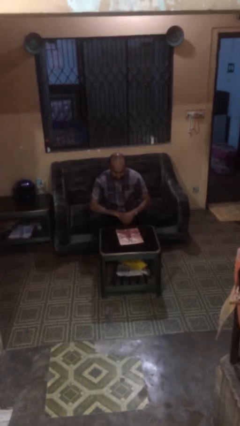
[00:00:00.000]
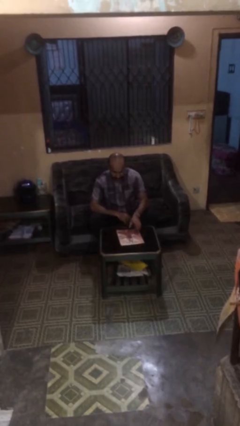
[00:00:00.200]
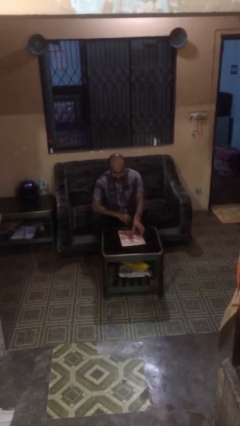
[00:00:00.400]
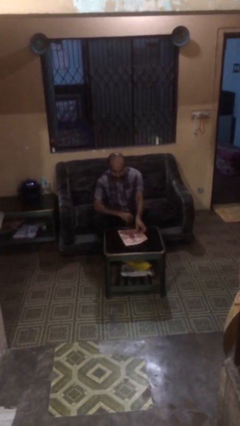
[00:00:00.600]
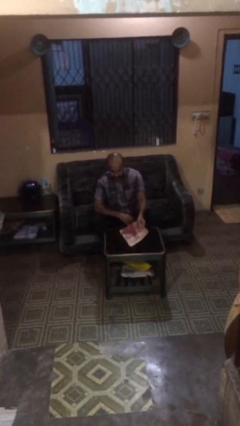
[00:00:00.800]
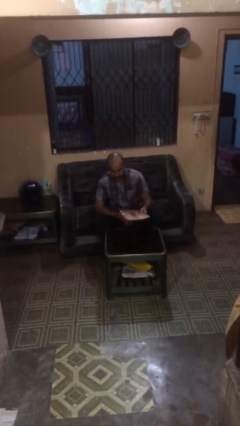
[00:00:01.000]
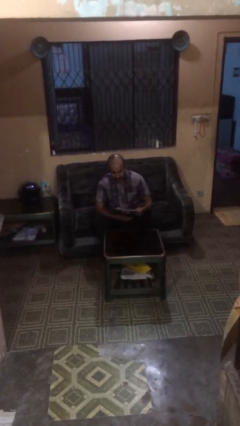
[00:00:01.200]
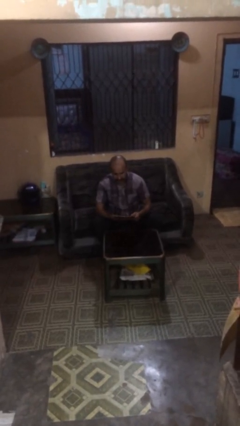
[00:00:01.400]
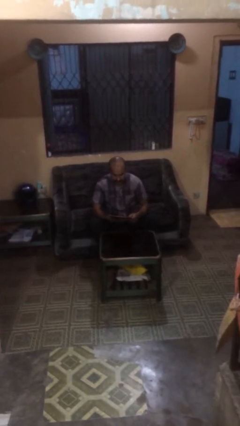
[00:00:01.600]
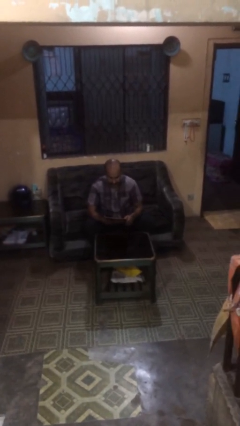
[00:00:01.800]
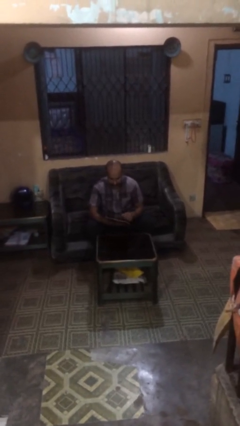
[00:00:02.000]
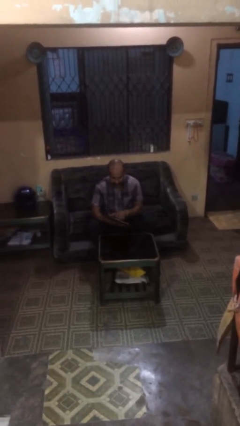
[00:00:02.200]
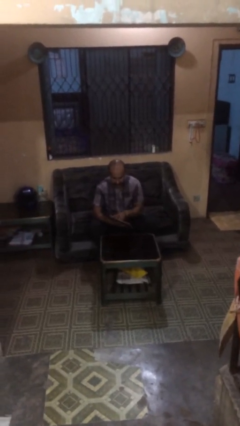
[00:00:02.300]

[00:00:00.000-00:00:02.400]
person picks up object from table

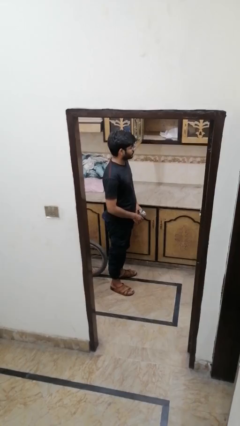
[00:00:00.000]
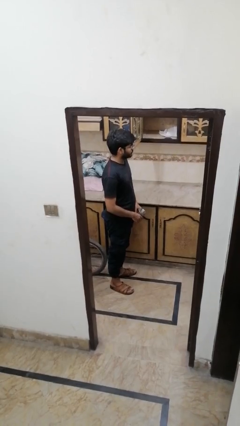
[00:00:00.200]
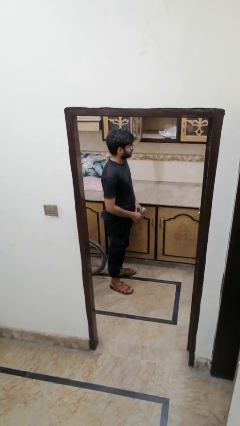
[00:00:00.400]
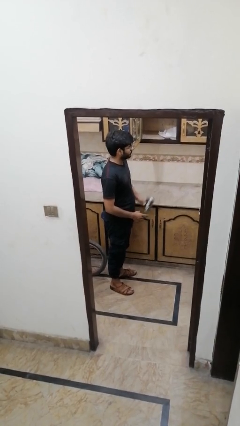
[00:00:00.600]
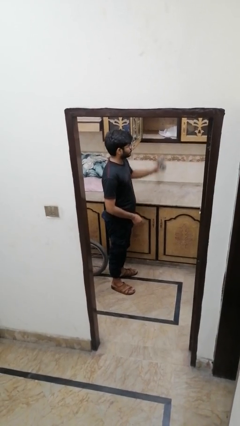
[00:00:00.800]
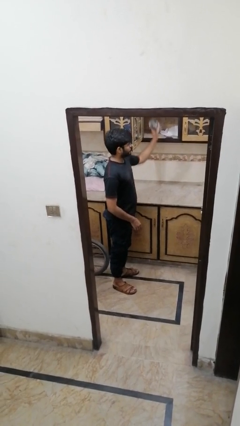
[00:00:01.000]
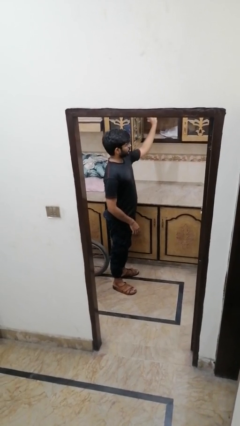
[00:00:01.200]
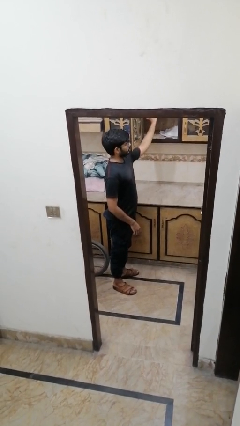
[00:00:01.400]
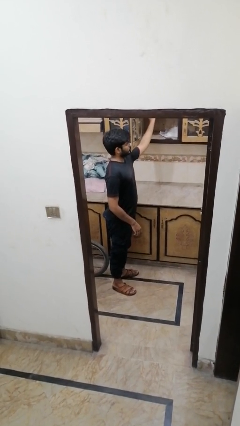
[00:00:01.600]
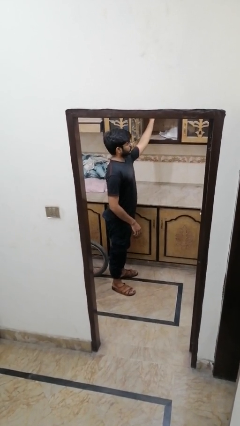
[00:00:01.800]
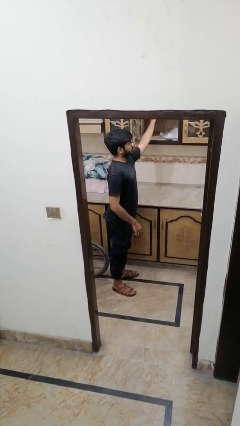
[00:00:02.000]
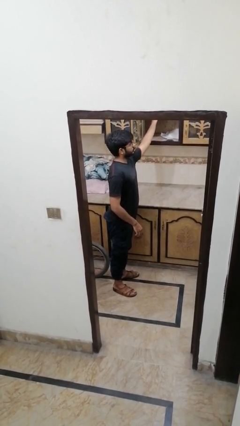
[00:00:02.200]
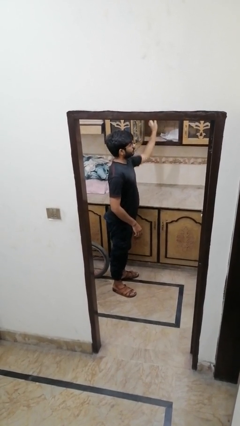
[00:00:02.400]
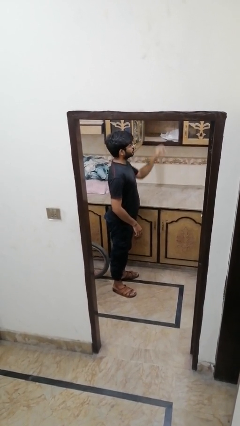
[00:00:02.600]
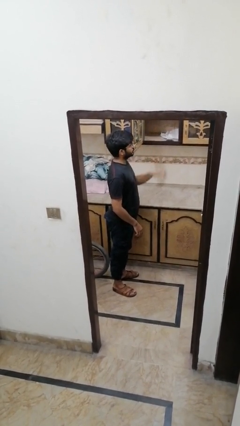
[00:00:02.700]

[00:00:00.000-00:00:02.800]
person puts down object into cabinet

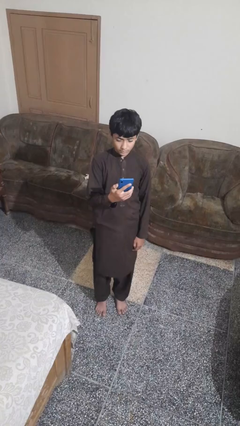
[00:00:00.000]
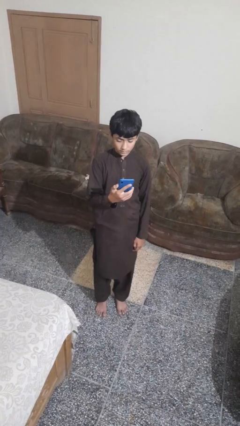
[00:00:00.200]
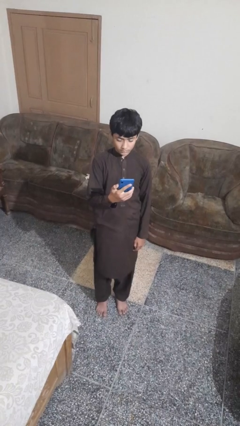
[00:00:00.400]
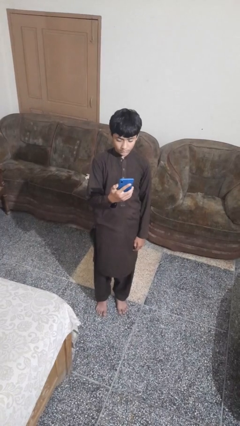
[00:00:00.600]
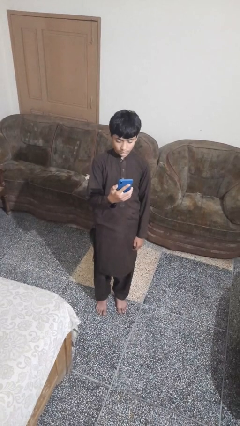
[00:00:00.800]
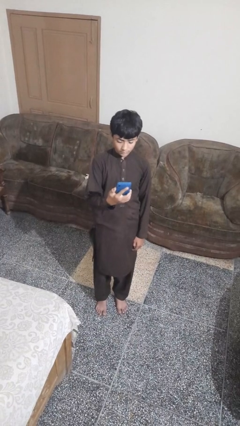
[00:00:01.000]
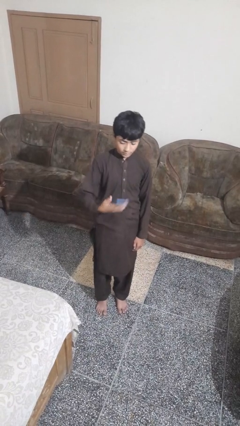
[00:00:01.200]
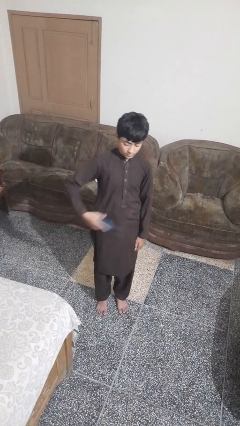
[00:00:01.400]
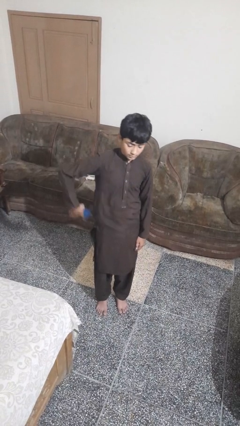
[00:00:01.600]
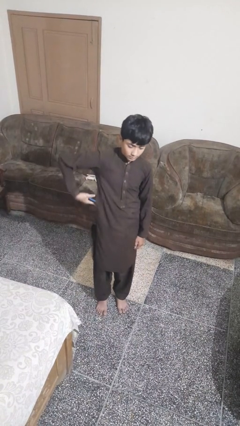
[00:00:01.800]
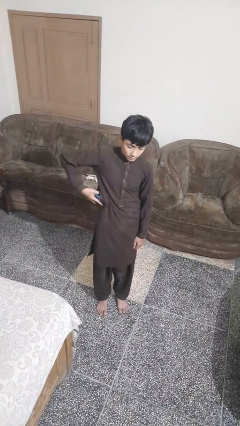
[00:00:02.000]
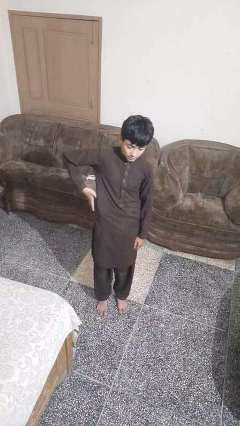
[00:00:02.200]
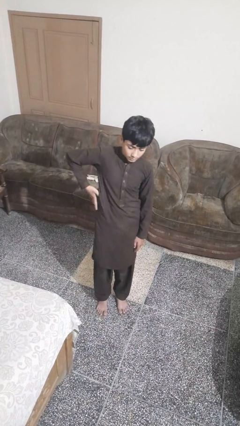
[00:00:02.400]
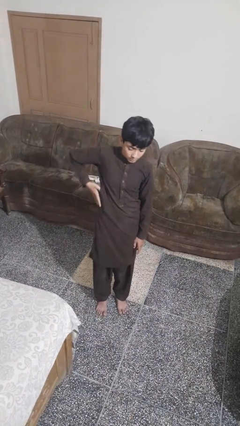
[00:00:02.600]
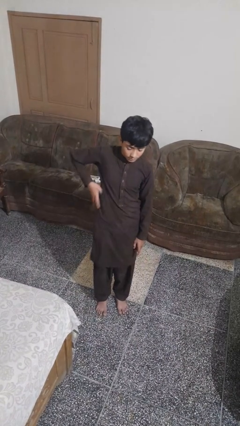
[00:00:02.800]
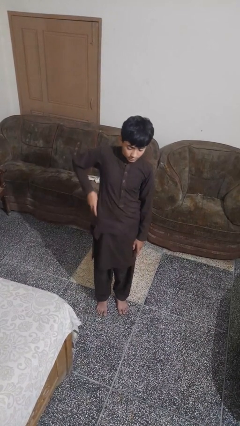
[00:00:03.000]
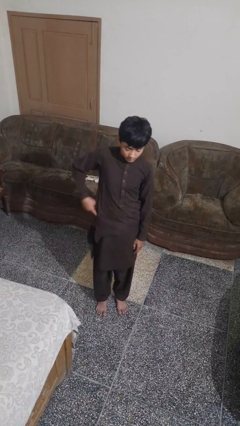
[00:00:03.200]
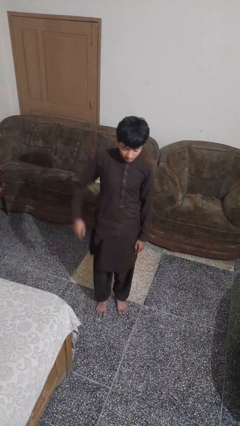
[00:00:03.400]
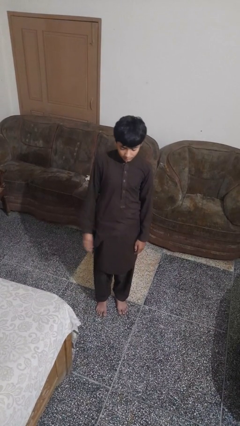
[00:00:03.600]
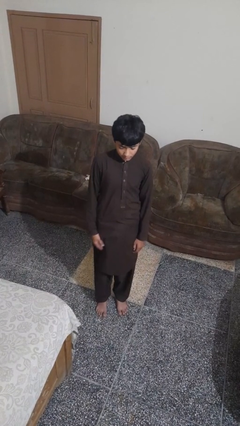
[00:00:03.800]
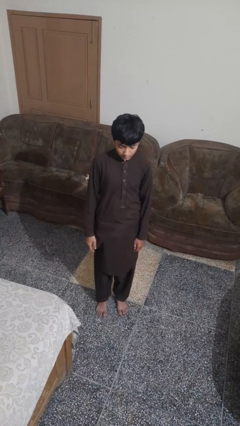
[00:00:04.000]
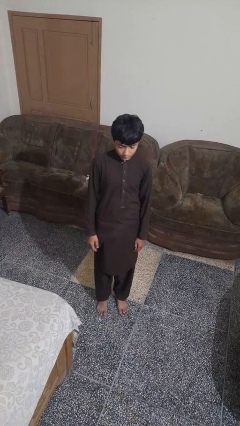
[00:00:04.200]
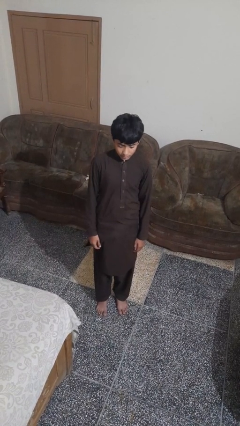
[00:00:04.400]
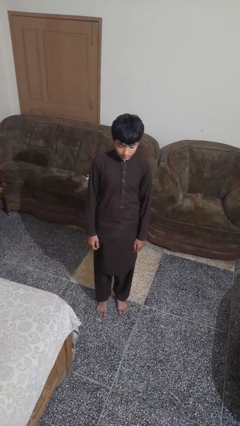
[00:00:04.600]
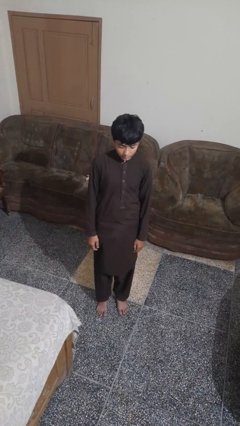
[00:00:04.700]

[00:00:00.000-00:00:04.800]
person puts phone into pocket

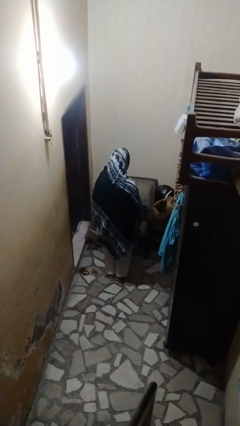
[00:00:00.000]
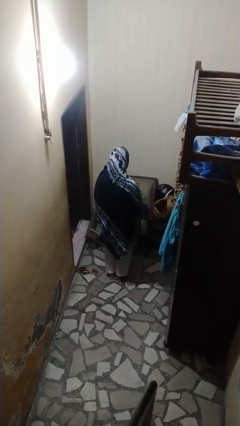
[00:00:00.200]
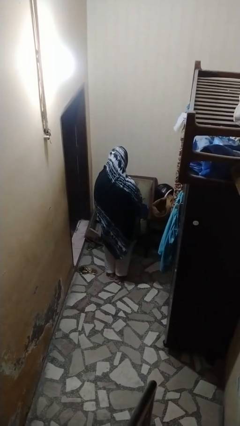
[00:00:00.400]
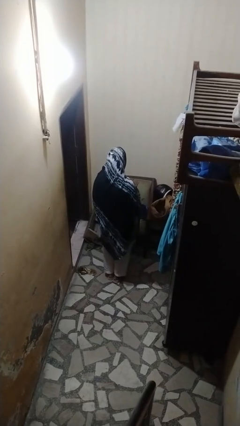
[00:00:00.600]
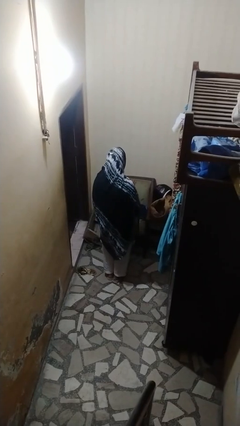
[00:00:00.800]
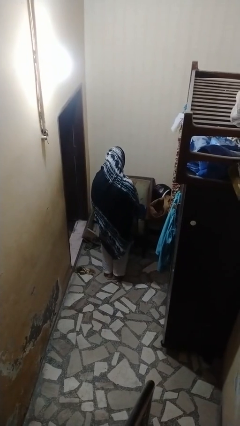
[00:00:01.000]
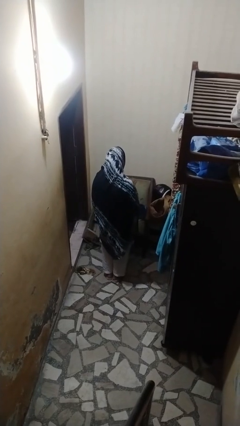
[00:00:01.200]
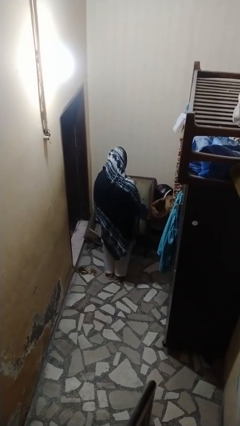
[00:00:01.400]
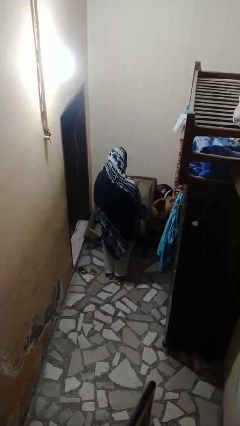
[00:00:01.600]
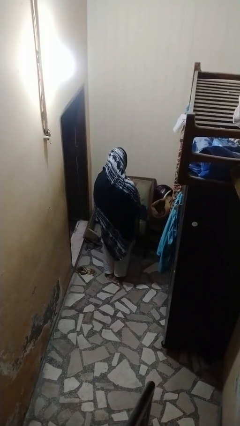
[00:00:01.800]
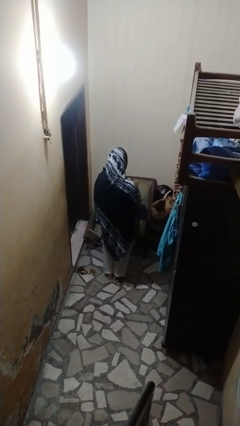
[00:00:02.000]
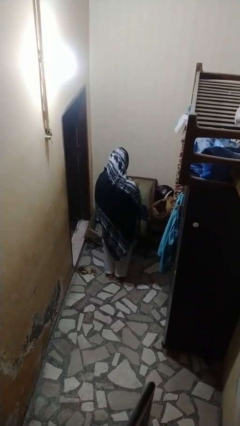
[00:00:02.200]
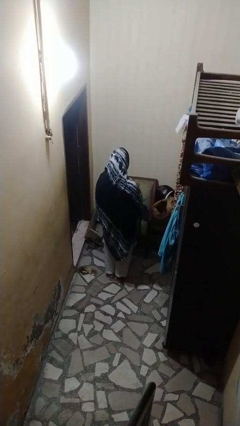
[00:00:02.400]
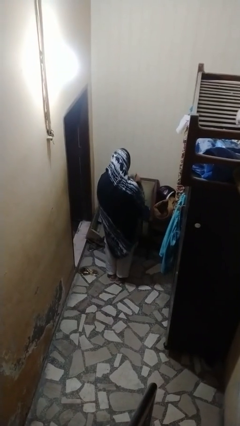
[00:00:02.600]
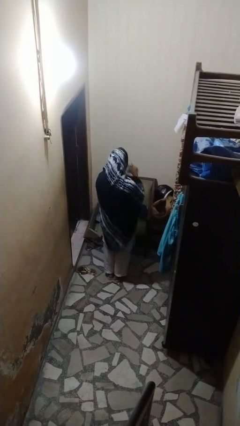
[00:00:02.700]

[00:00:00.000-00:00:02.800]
person stirs mug

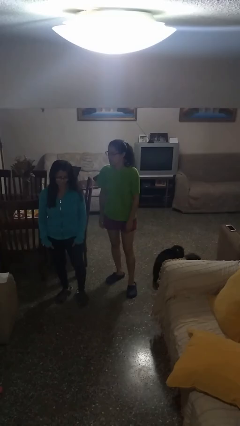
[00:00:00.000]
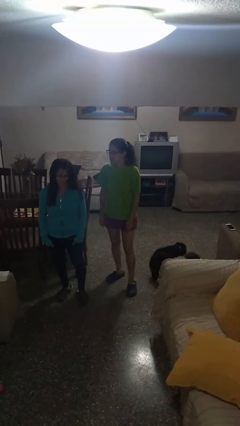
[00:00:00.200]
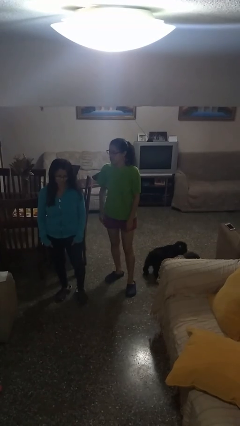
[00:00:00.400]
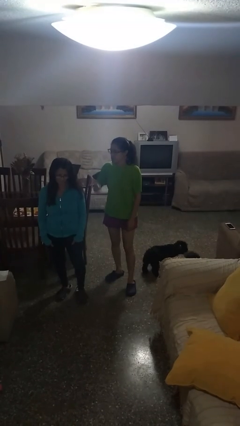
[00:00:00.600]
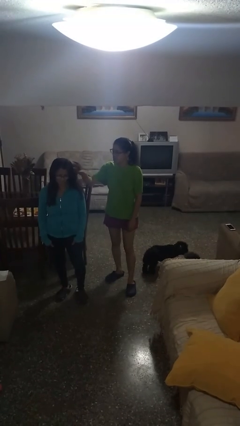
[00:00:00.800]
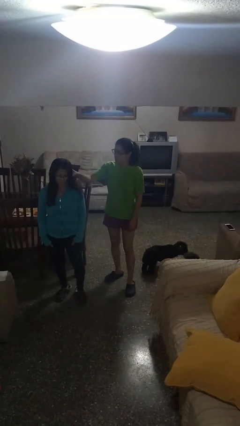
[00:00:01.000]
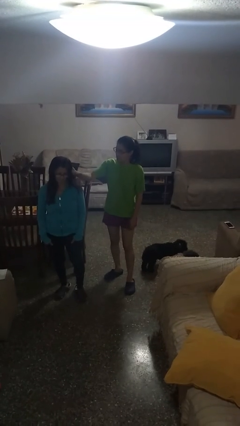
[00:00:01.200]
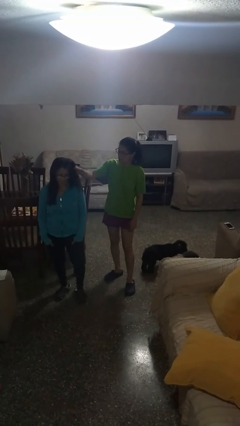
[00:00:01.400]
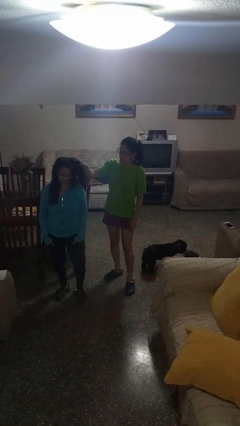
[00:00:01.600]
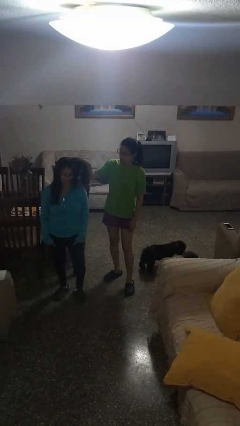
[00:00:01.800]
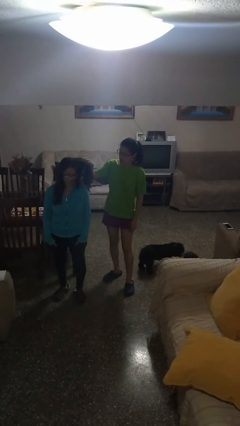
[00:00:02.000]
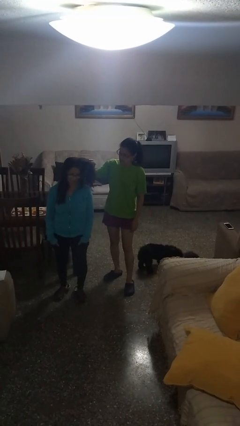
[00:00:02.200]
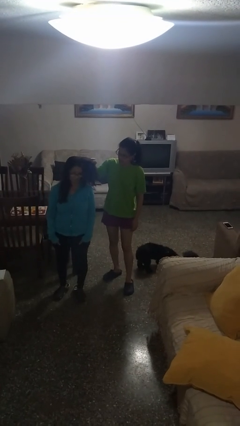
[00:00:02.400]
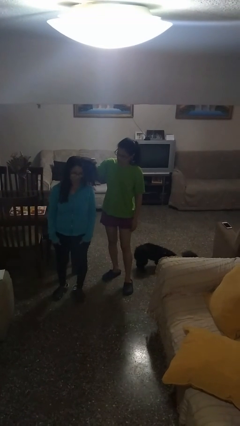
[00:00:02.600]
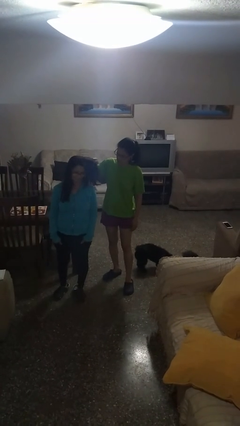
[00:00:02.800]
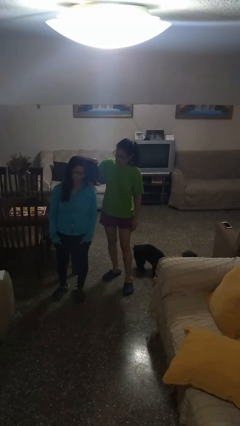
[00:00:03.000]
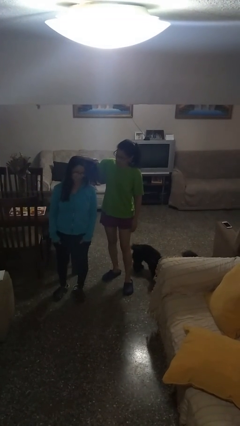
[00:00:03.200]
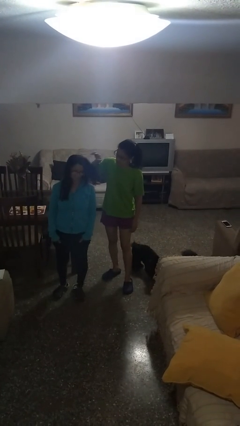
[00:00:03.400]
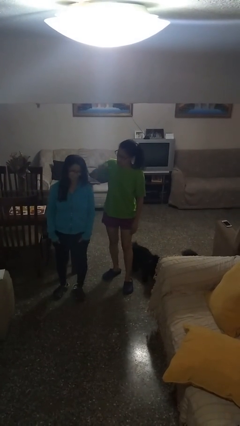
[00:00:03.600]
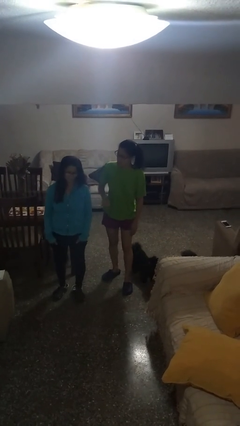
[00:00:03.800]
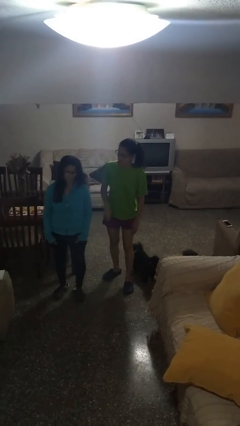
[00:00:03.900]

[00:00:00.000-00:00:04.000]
person grabs person by hair

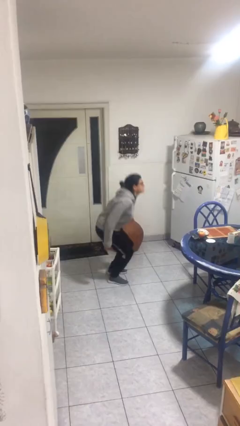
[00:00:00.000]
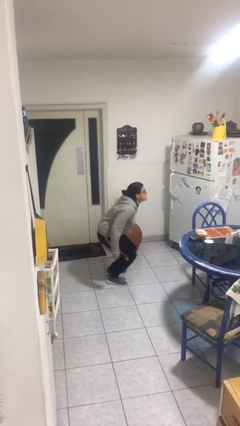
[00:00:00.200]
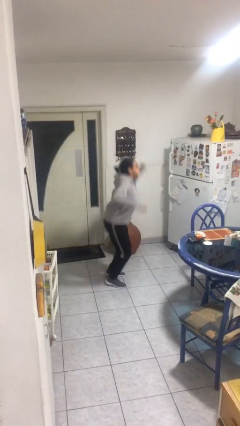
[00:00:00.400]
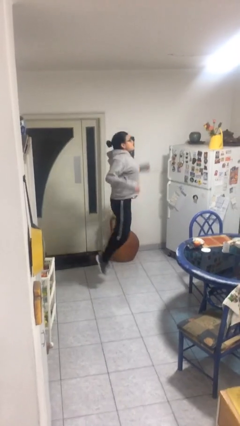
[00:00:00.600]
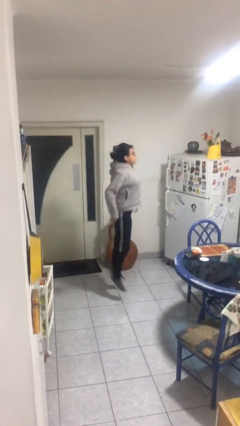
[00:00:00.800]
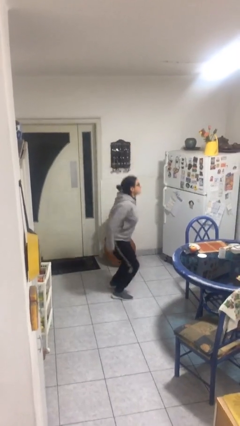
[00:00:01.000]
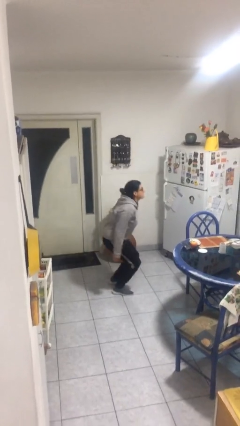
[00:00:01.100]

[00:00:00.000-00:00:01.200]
person jumps
